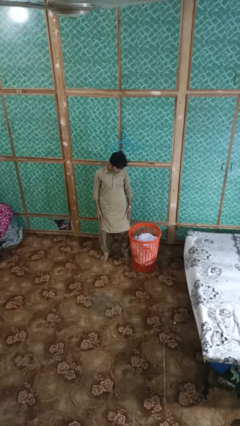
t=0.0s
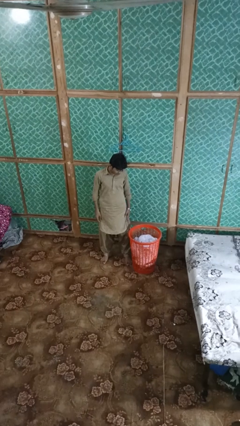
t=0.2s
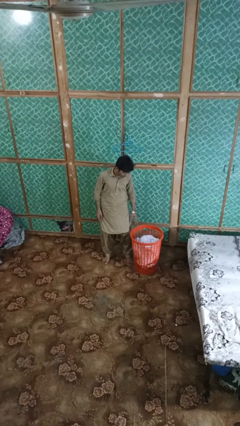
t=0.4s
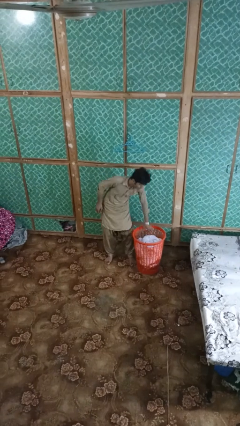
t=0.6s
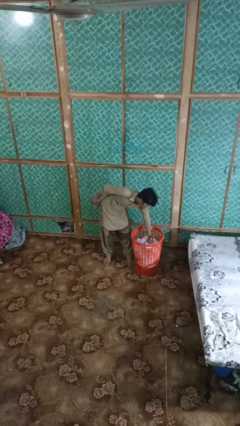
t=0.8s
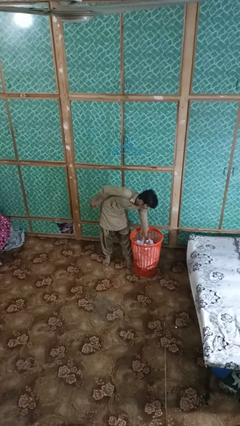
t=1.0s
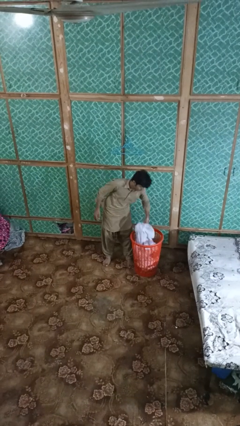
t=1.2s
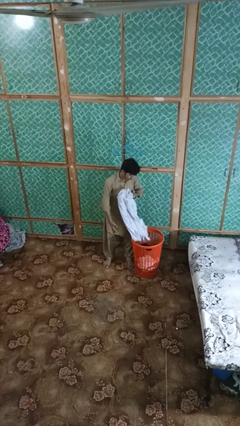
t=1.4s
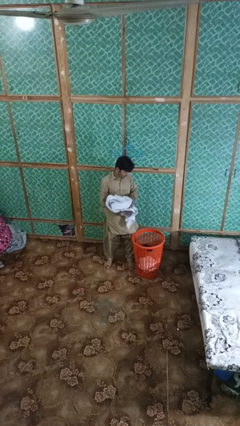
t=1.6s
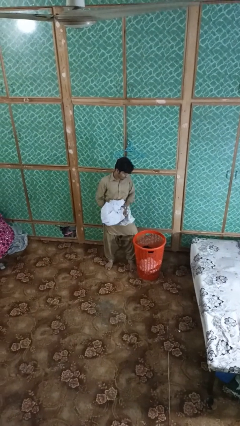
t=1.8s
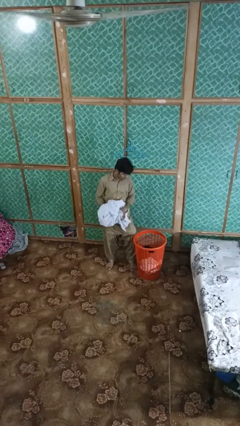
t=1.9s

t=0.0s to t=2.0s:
person takes object from basket

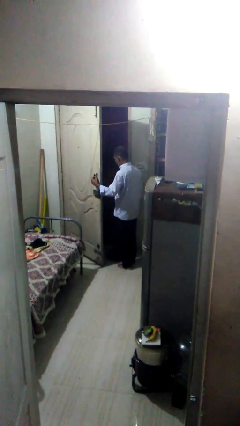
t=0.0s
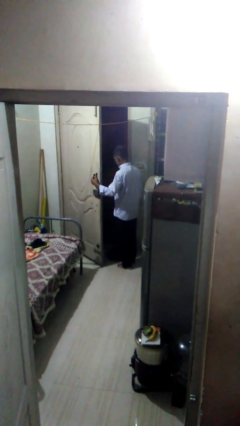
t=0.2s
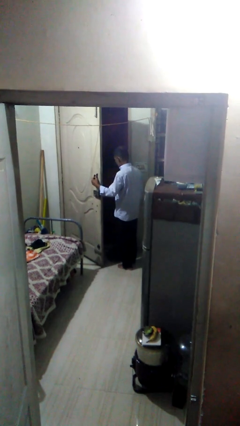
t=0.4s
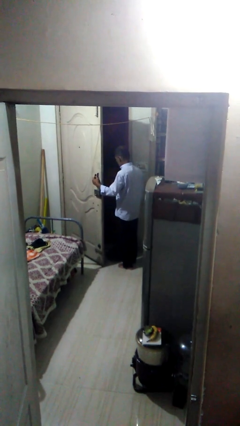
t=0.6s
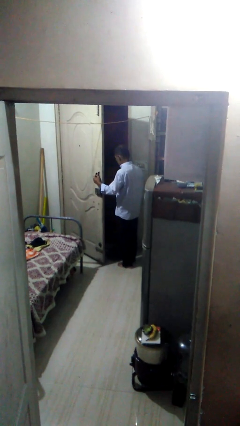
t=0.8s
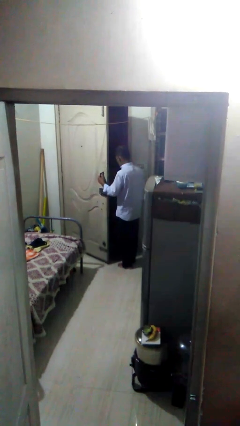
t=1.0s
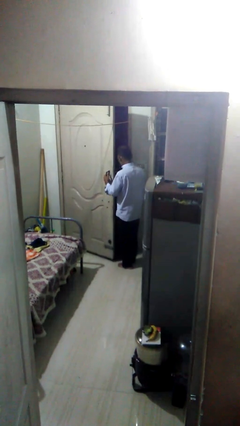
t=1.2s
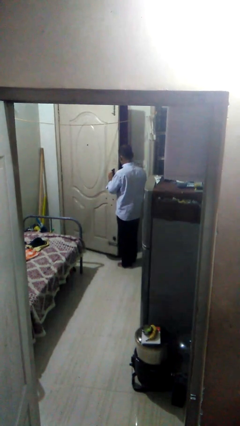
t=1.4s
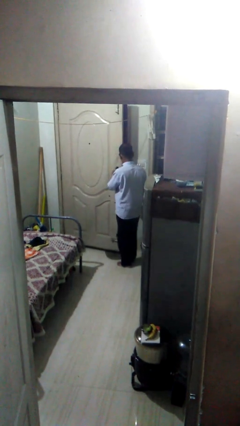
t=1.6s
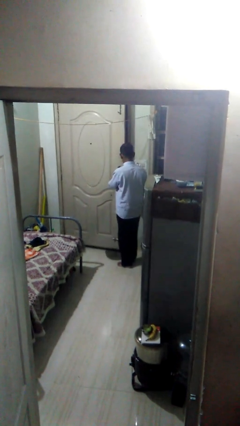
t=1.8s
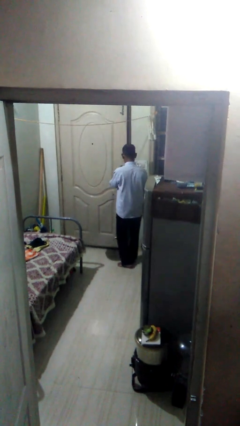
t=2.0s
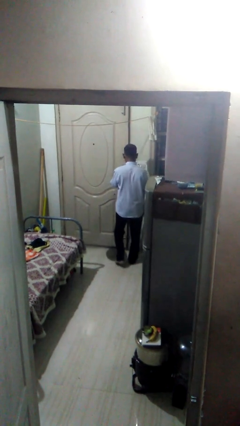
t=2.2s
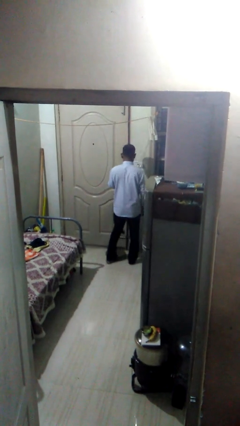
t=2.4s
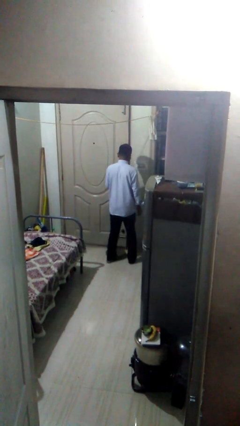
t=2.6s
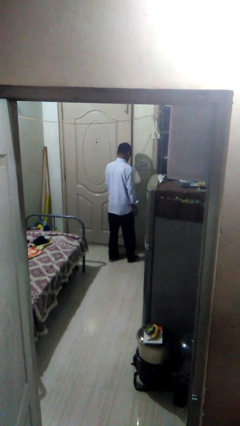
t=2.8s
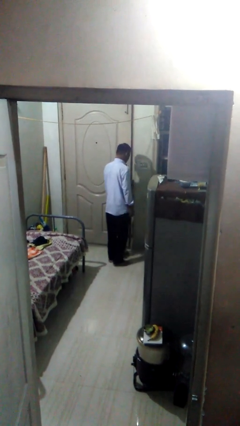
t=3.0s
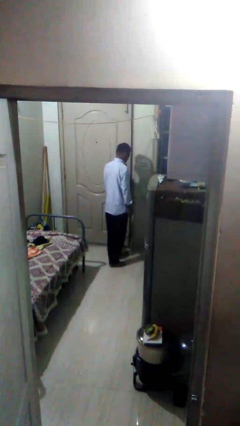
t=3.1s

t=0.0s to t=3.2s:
person closes facility door

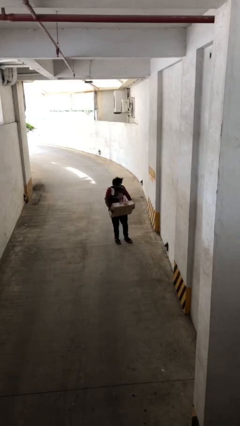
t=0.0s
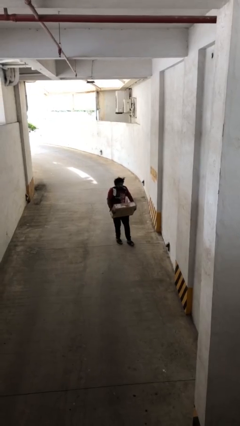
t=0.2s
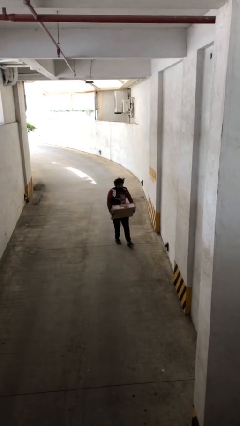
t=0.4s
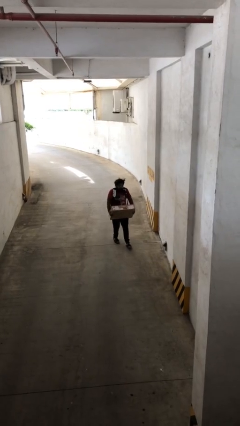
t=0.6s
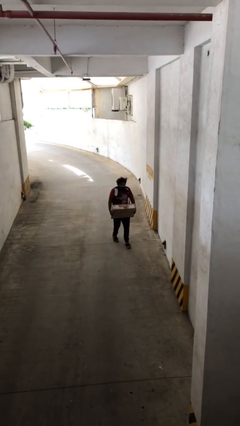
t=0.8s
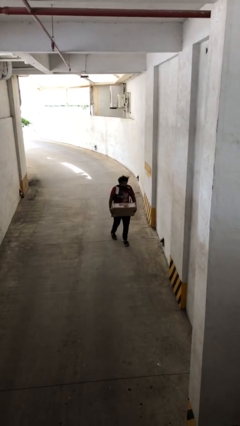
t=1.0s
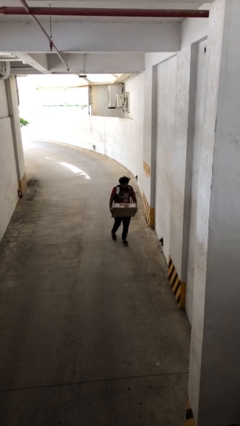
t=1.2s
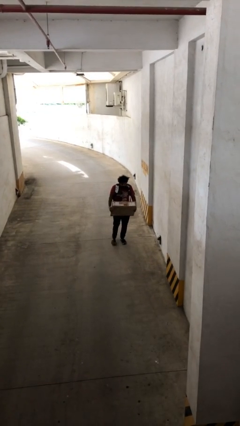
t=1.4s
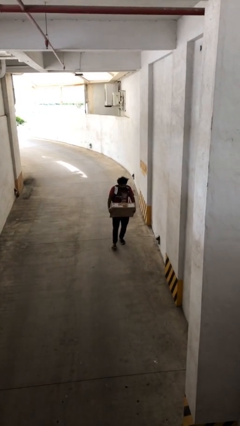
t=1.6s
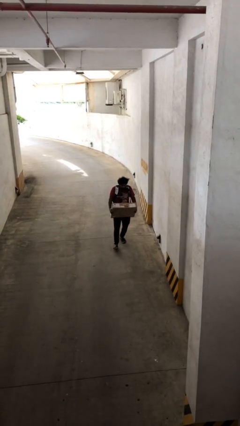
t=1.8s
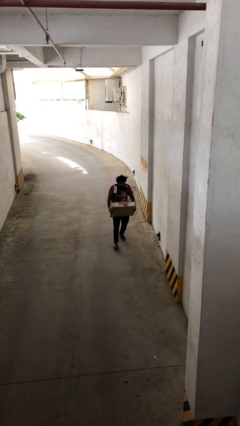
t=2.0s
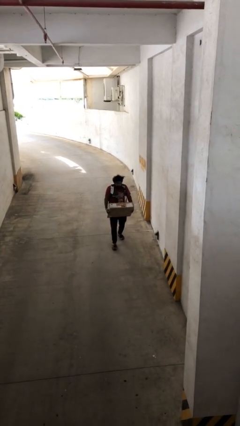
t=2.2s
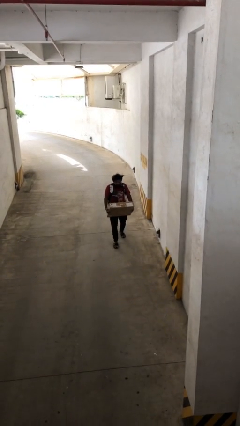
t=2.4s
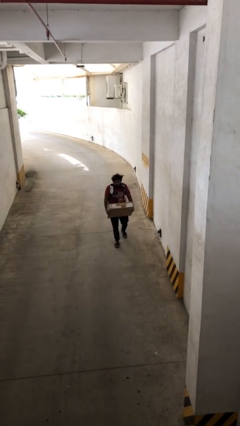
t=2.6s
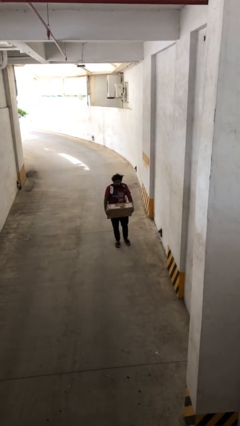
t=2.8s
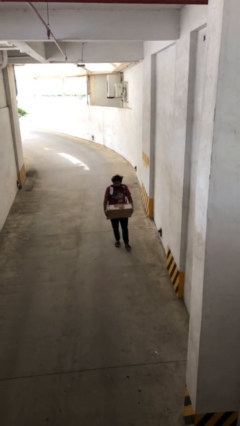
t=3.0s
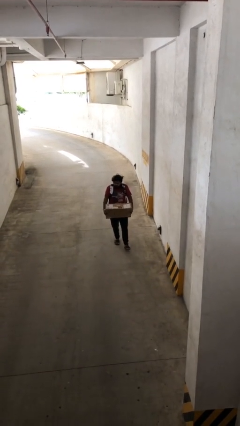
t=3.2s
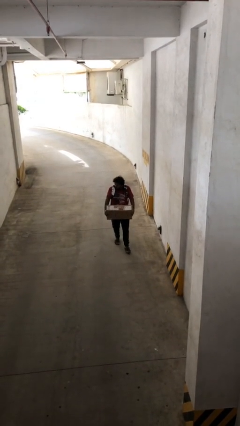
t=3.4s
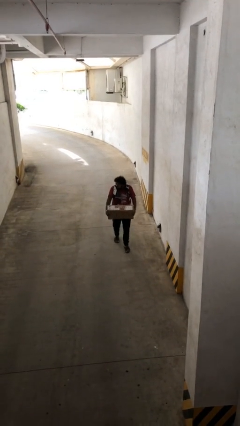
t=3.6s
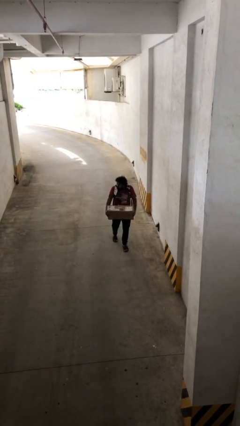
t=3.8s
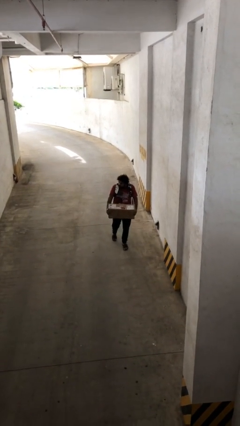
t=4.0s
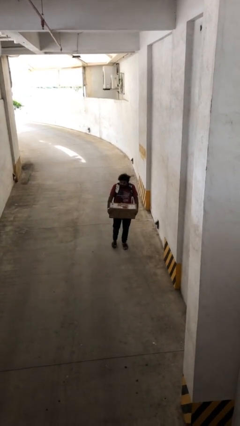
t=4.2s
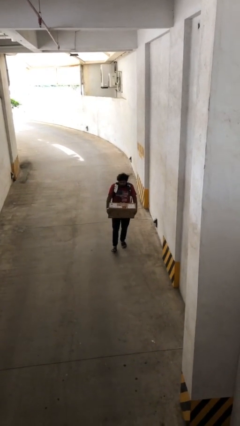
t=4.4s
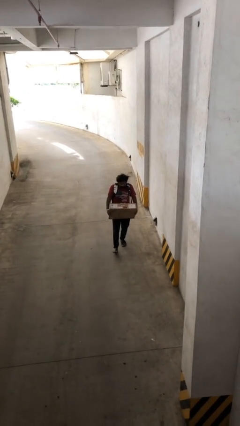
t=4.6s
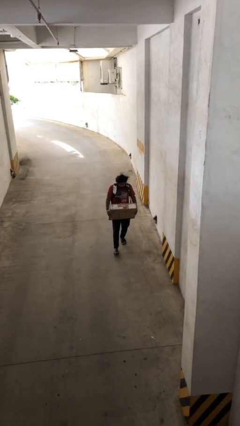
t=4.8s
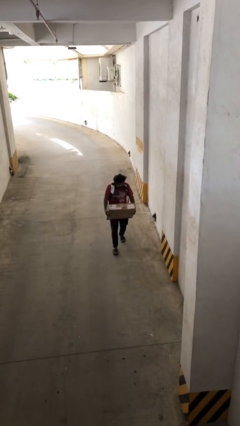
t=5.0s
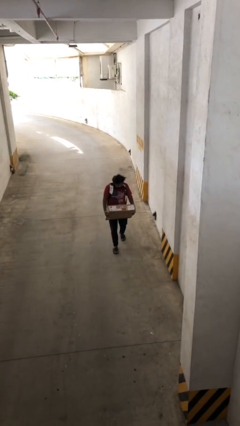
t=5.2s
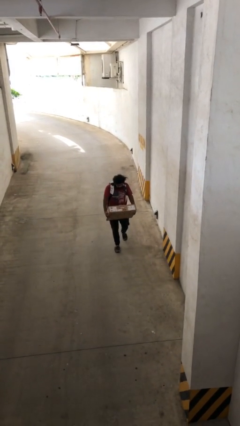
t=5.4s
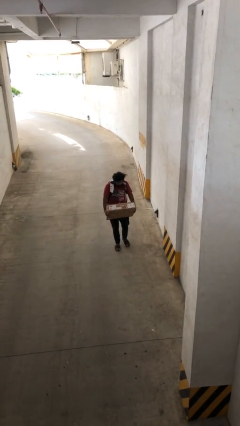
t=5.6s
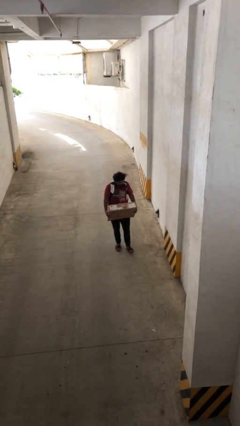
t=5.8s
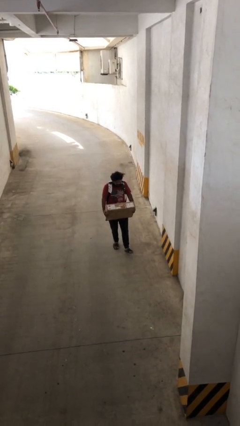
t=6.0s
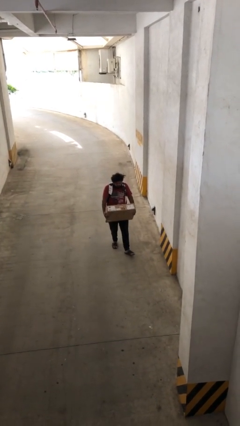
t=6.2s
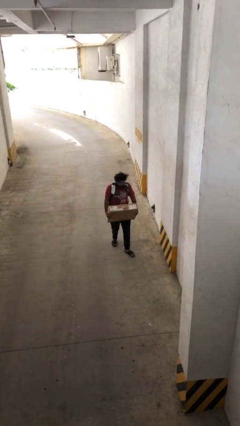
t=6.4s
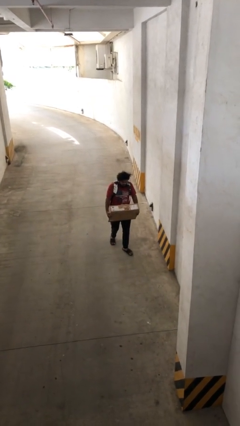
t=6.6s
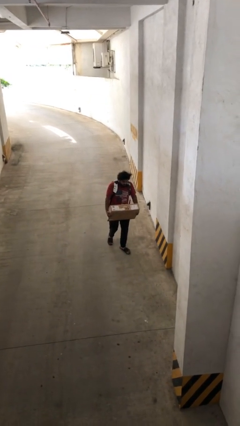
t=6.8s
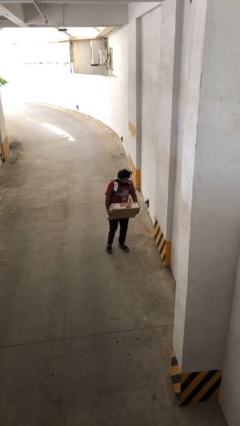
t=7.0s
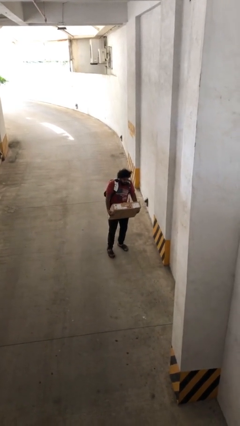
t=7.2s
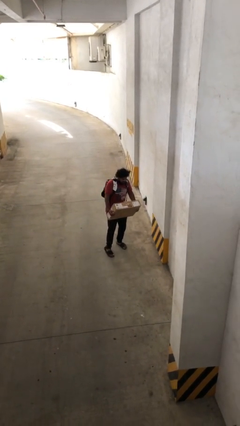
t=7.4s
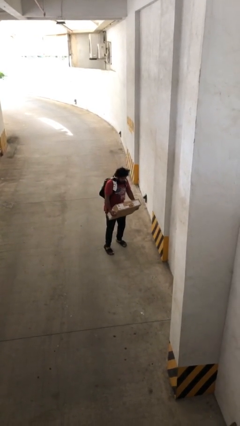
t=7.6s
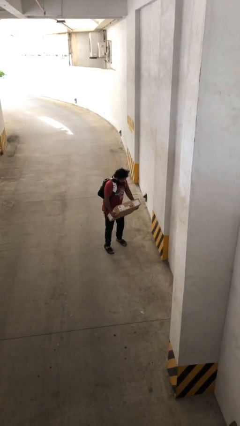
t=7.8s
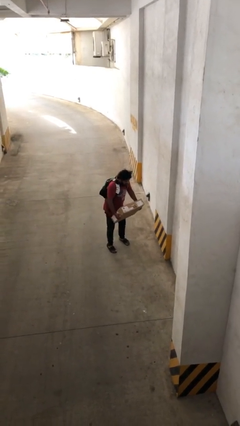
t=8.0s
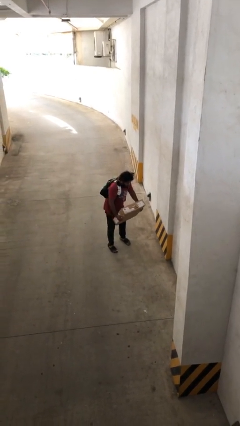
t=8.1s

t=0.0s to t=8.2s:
person carries heavy object

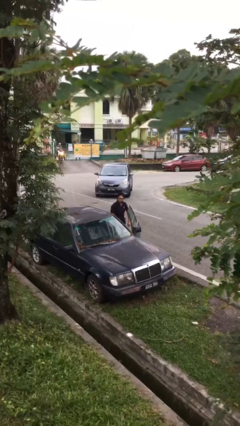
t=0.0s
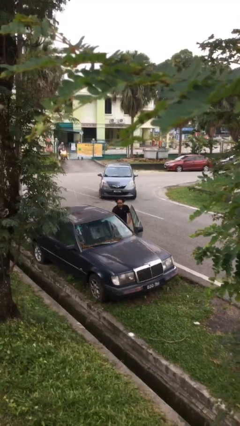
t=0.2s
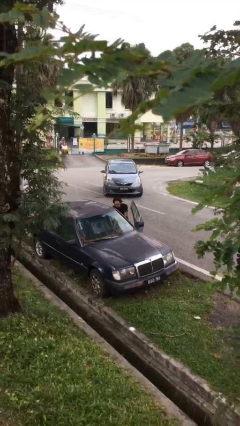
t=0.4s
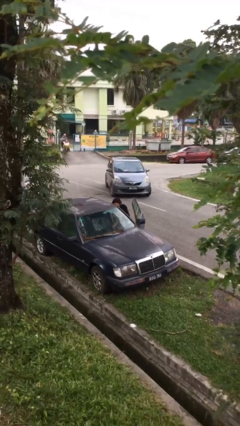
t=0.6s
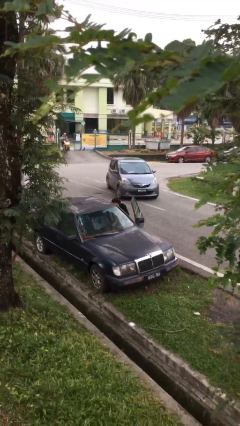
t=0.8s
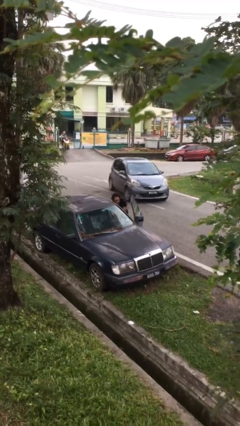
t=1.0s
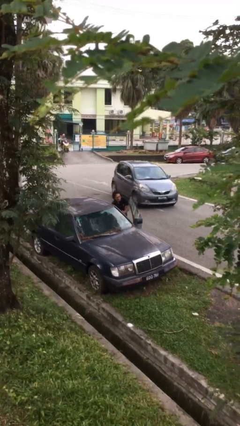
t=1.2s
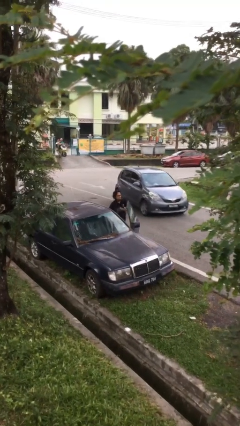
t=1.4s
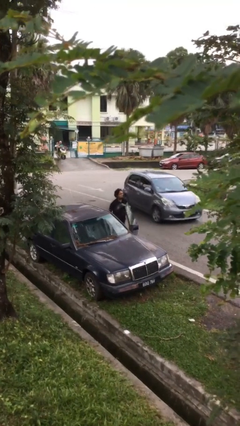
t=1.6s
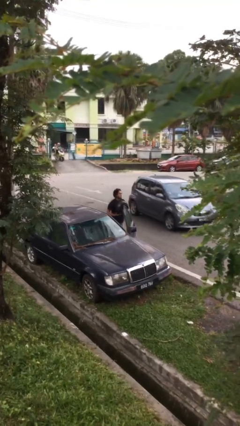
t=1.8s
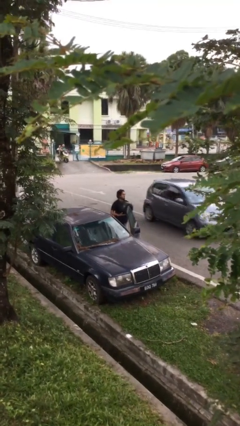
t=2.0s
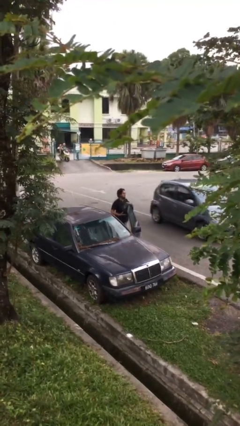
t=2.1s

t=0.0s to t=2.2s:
person unloads car

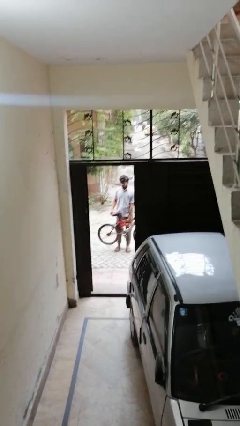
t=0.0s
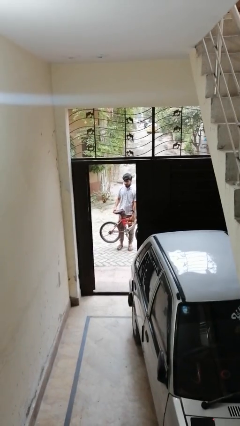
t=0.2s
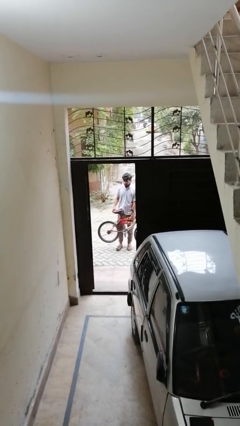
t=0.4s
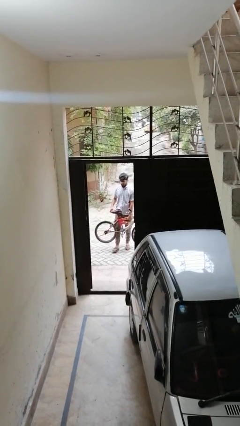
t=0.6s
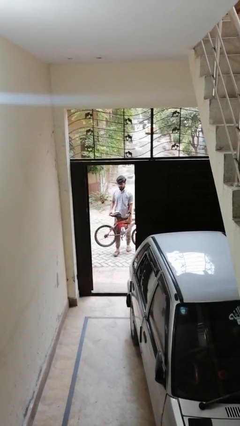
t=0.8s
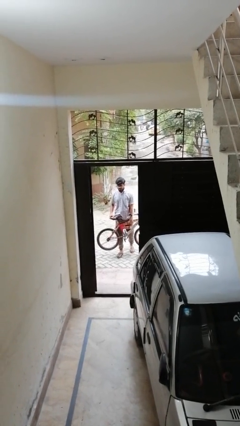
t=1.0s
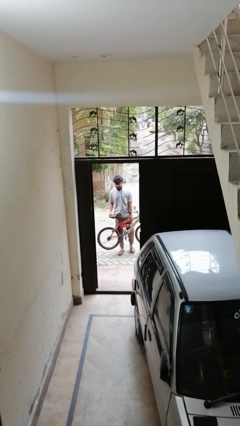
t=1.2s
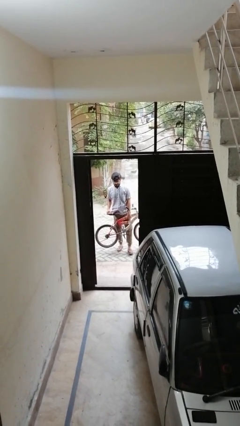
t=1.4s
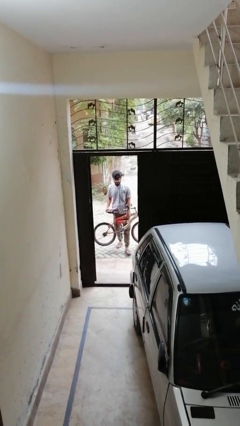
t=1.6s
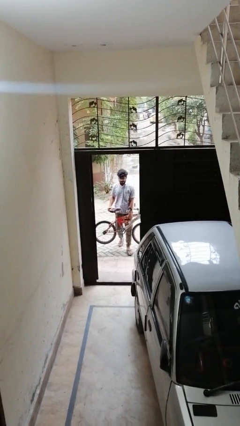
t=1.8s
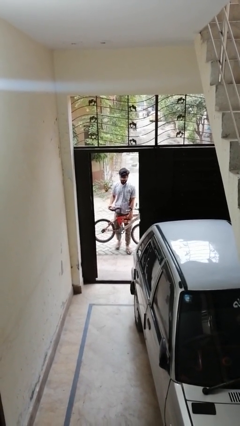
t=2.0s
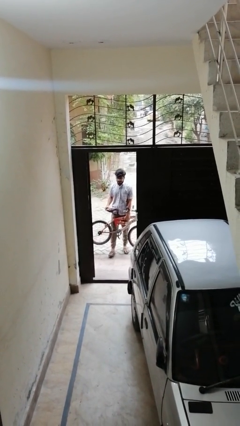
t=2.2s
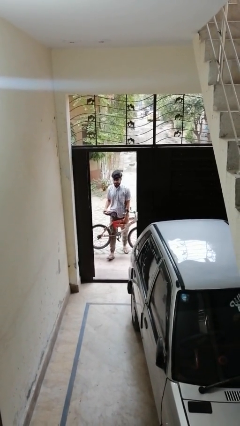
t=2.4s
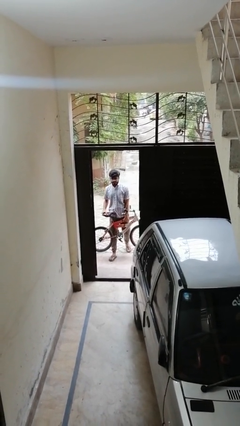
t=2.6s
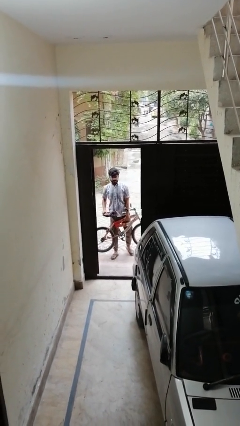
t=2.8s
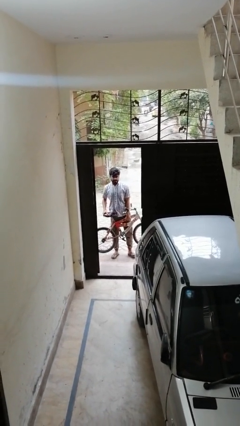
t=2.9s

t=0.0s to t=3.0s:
person carries bicycle
